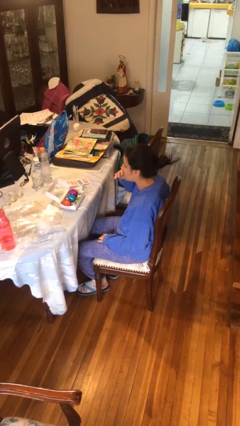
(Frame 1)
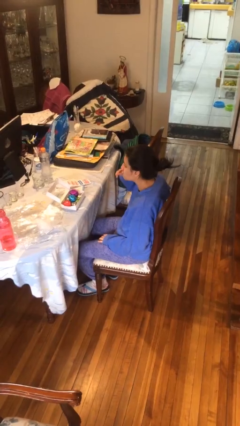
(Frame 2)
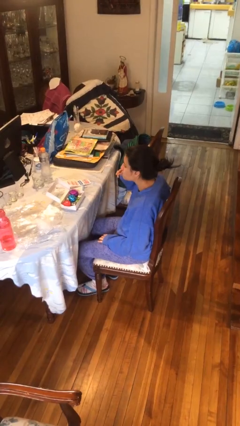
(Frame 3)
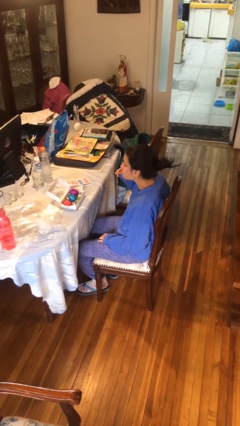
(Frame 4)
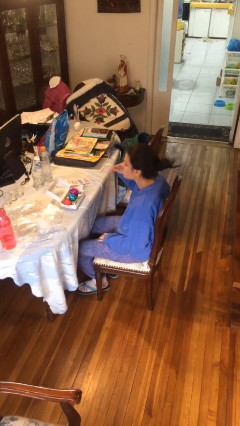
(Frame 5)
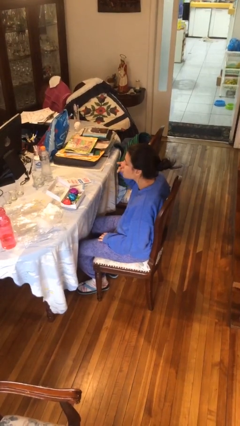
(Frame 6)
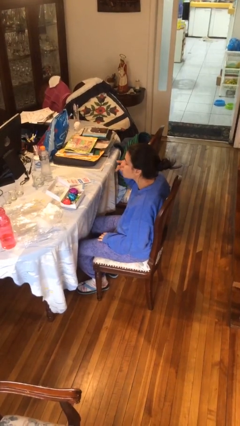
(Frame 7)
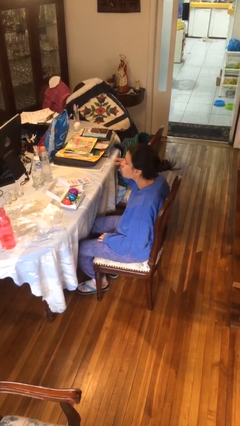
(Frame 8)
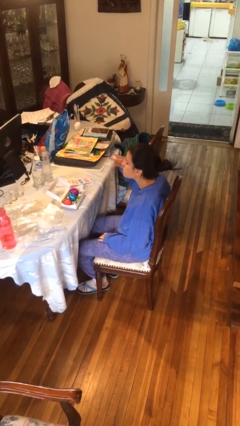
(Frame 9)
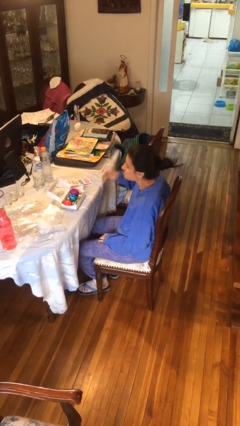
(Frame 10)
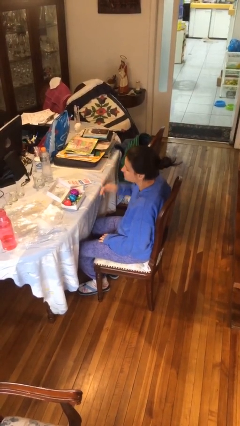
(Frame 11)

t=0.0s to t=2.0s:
person licks fingers

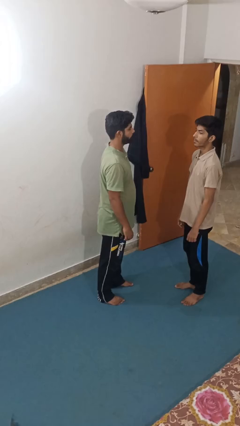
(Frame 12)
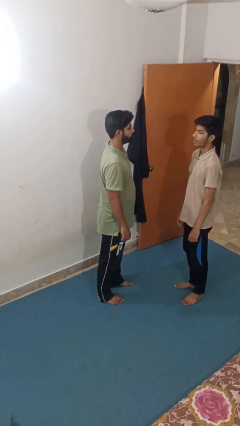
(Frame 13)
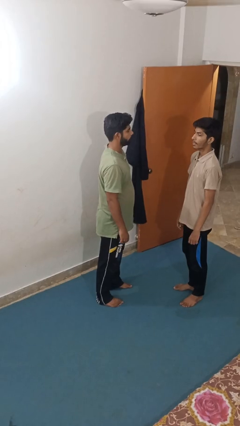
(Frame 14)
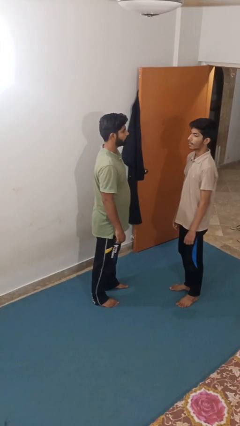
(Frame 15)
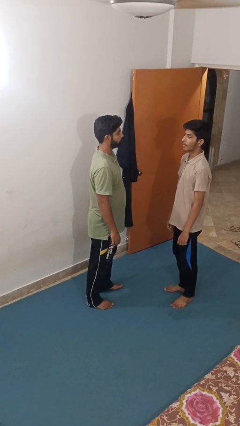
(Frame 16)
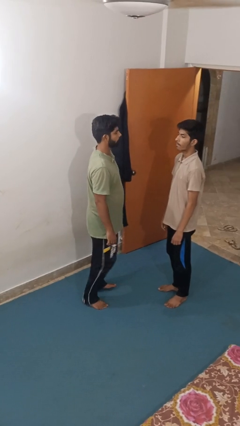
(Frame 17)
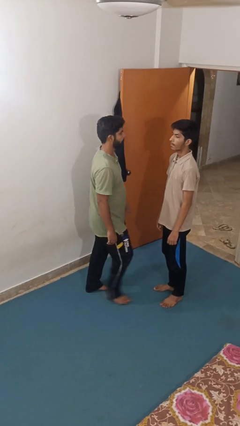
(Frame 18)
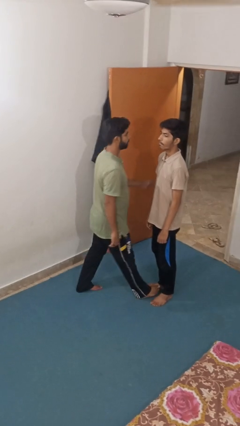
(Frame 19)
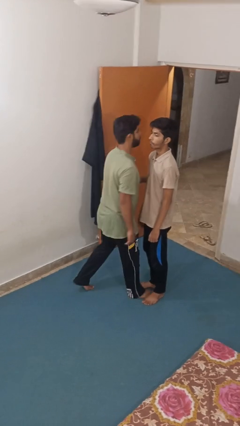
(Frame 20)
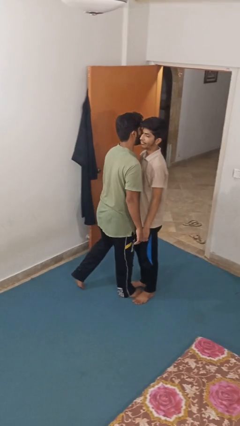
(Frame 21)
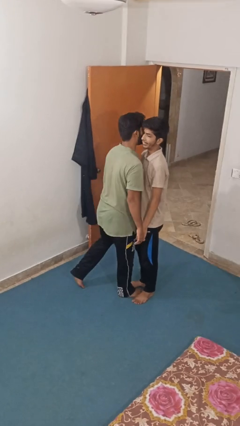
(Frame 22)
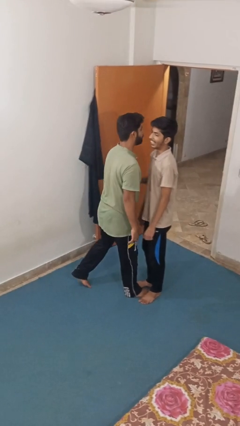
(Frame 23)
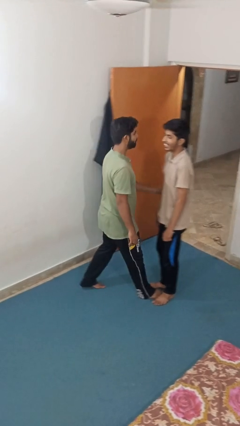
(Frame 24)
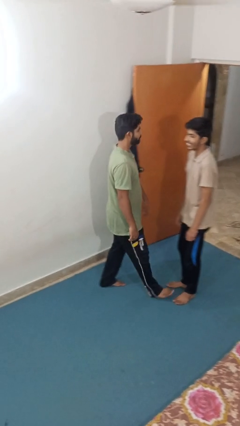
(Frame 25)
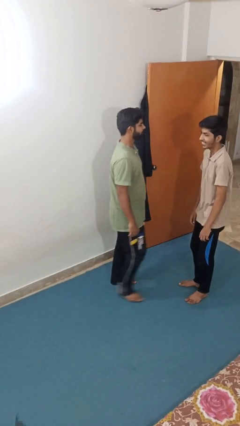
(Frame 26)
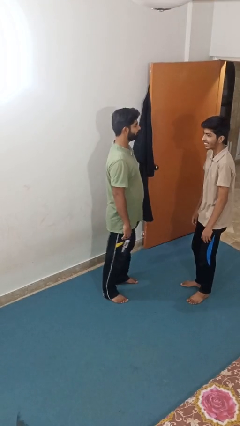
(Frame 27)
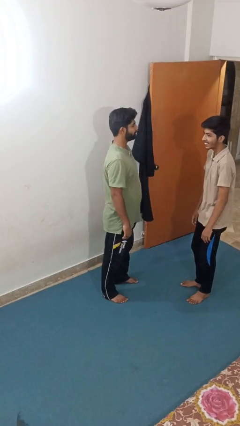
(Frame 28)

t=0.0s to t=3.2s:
person kisses cheek of person

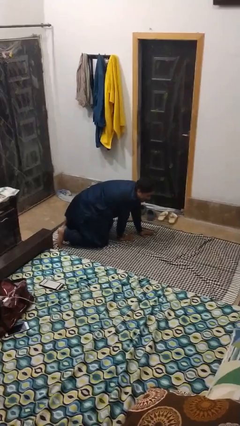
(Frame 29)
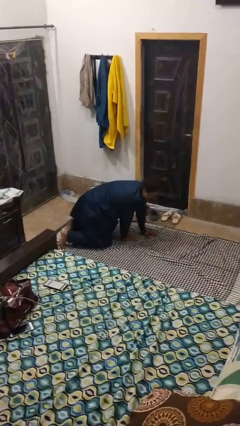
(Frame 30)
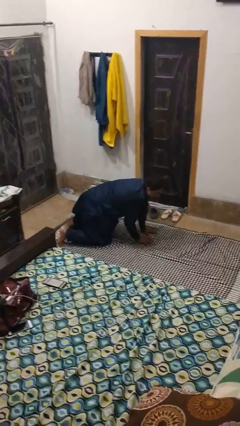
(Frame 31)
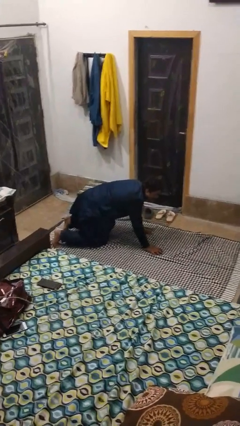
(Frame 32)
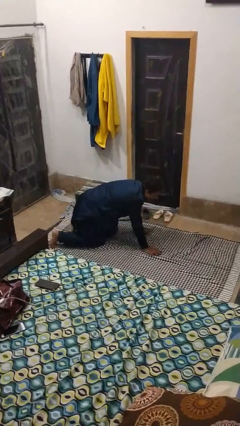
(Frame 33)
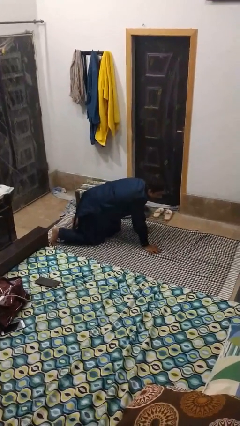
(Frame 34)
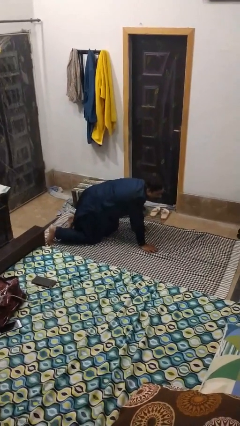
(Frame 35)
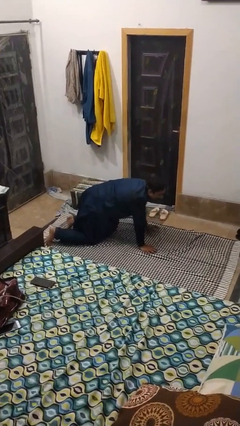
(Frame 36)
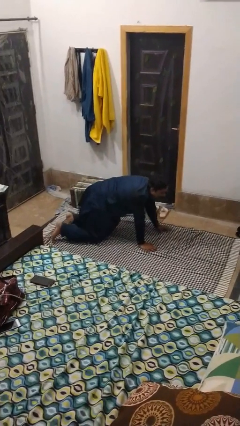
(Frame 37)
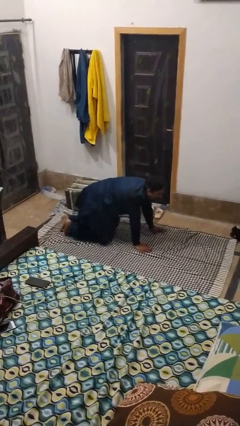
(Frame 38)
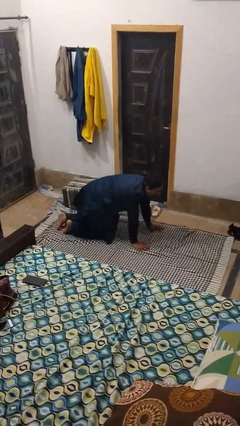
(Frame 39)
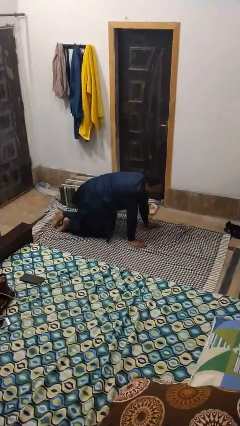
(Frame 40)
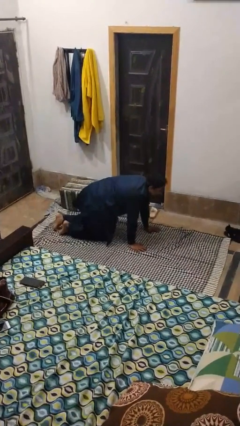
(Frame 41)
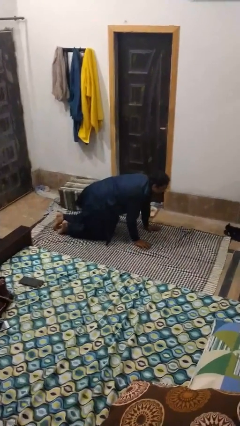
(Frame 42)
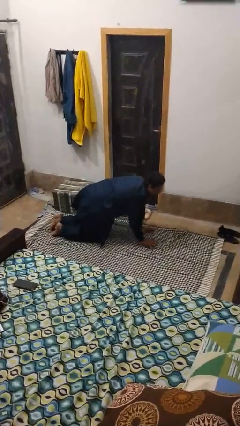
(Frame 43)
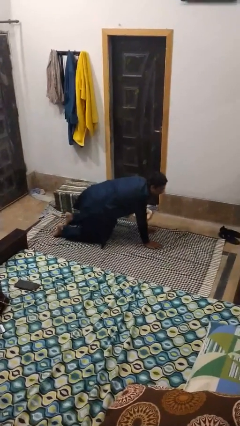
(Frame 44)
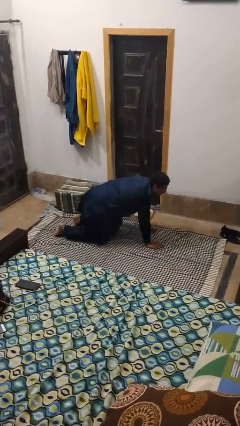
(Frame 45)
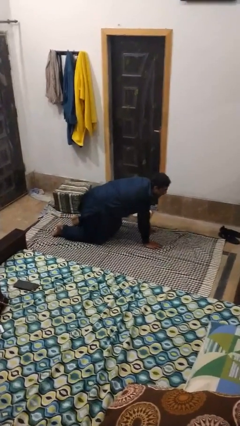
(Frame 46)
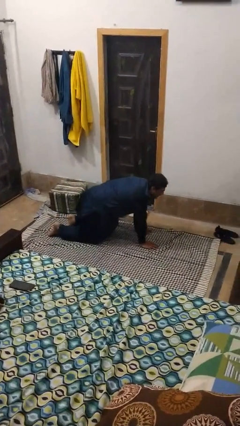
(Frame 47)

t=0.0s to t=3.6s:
person crawls

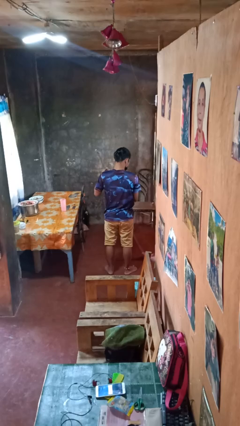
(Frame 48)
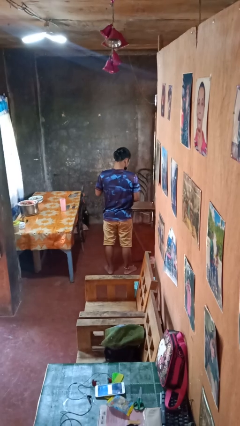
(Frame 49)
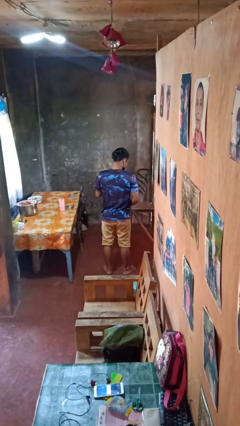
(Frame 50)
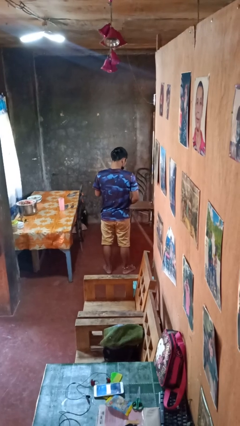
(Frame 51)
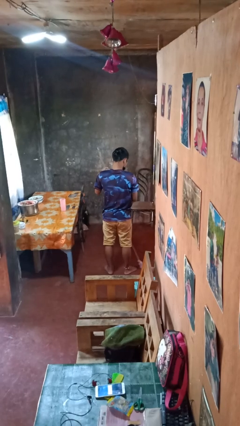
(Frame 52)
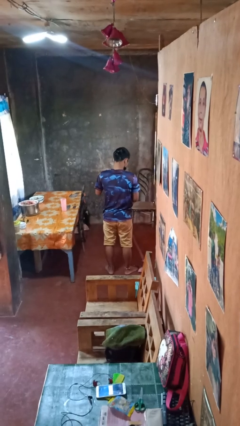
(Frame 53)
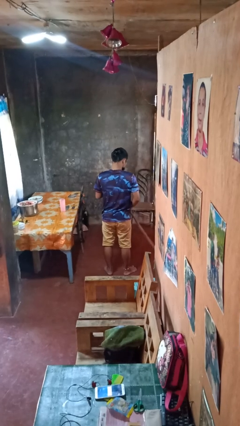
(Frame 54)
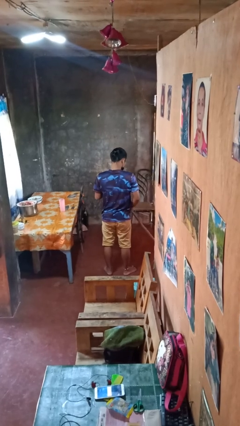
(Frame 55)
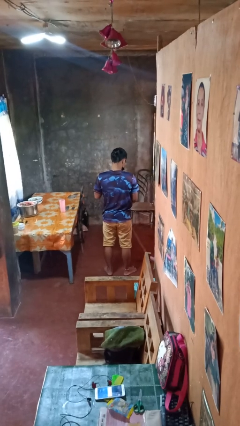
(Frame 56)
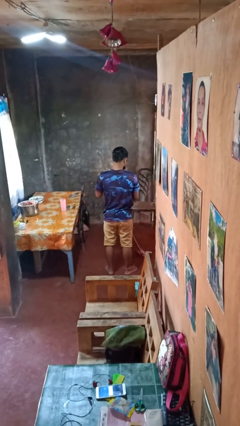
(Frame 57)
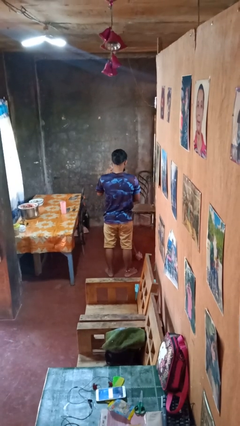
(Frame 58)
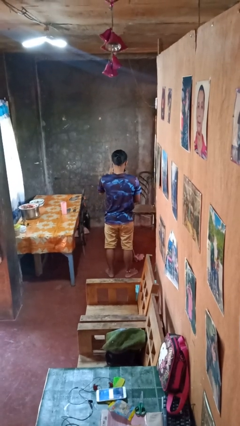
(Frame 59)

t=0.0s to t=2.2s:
person mops

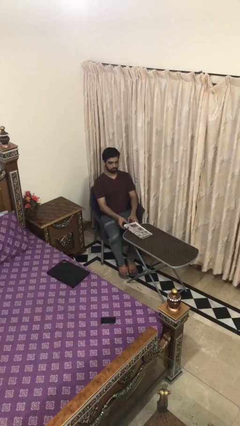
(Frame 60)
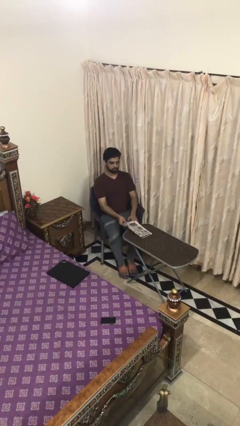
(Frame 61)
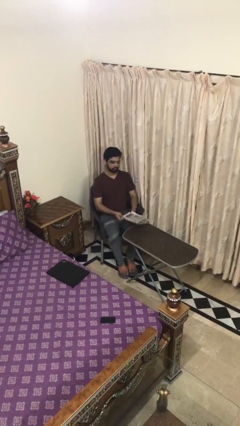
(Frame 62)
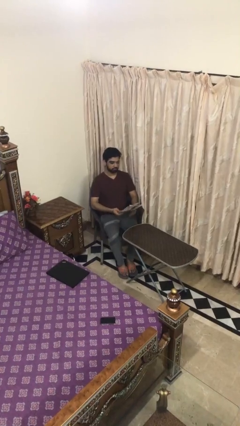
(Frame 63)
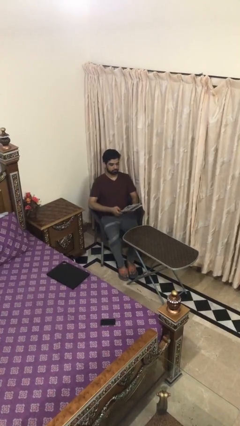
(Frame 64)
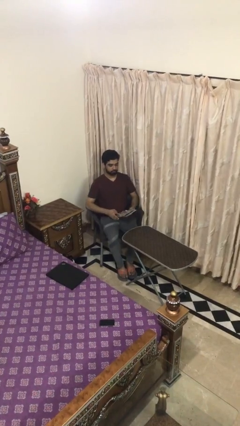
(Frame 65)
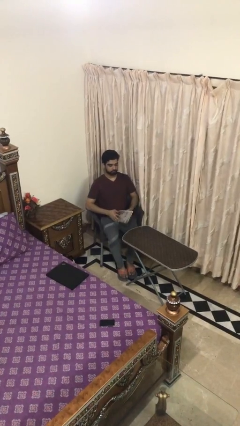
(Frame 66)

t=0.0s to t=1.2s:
person picks up object from table

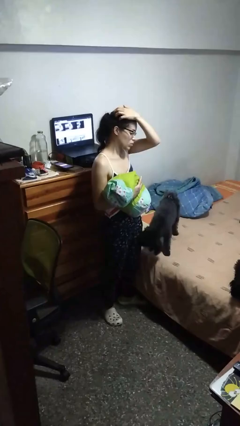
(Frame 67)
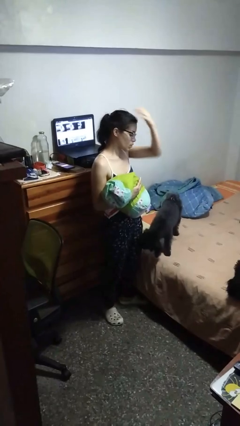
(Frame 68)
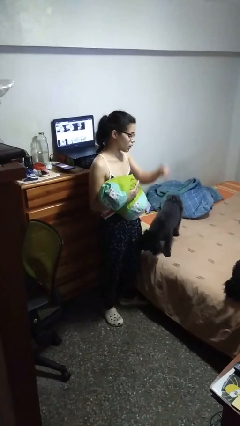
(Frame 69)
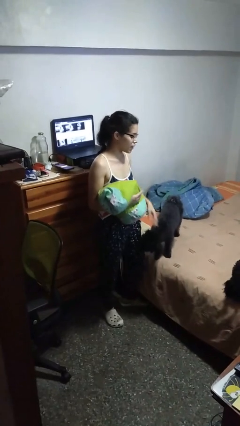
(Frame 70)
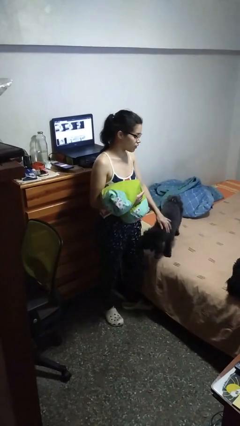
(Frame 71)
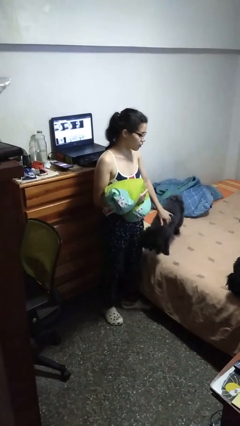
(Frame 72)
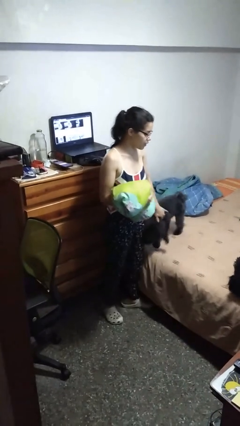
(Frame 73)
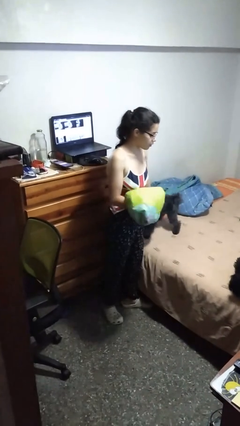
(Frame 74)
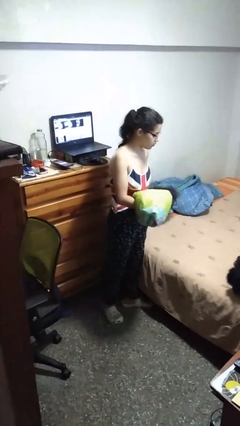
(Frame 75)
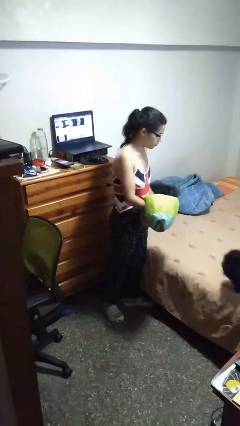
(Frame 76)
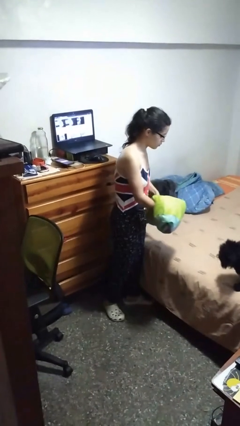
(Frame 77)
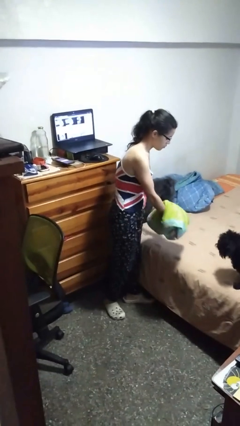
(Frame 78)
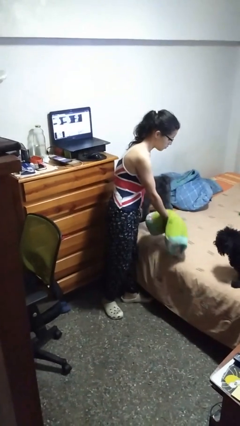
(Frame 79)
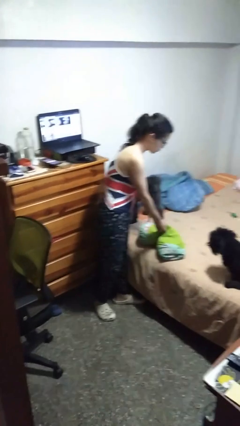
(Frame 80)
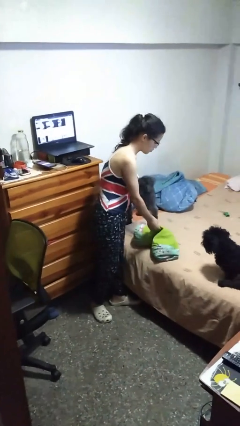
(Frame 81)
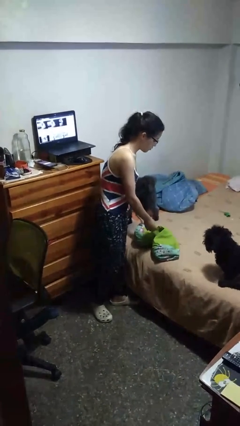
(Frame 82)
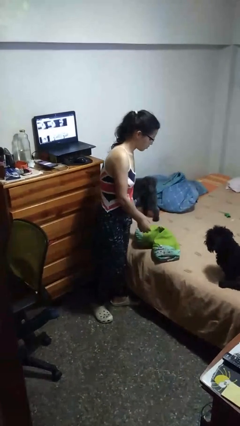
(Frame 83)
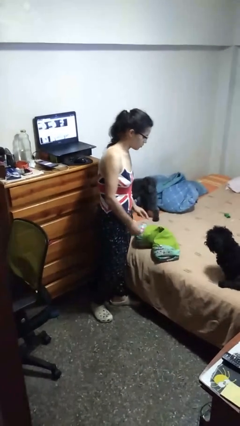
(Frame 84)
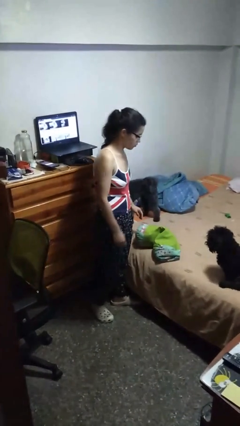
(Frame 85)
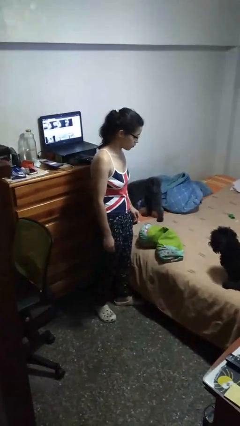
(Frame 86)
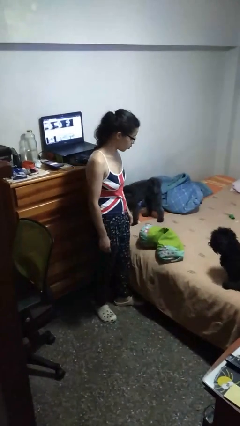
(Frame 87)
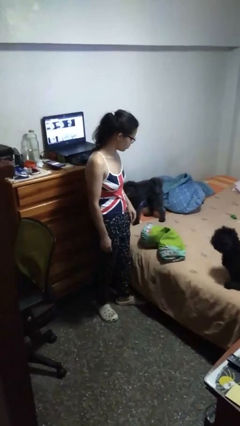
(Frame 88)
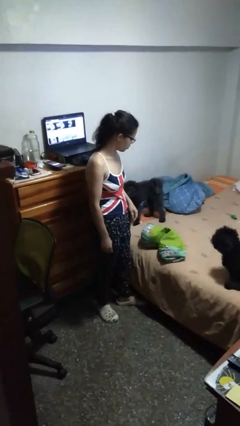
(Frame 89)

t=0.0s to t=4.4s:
person puts down object on bed

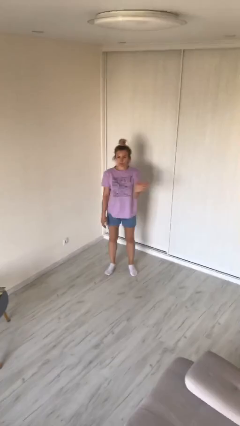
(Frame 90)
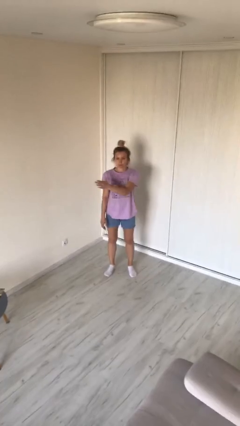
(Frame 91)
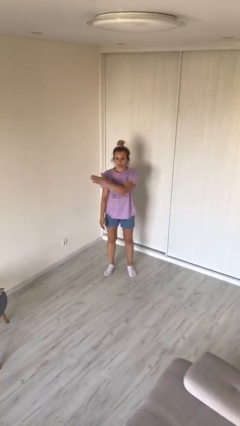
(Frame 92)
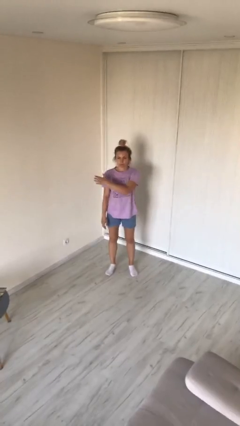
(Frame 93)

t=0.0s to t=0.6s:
person gestures swipe right
